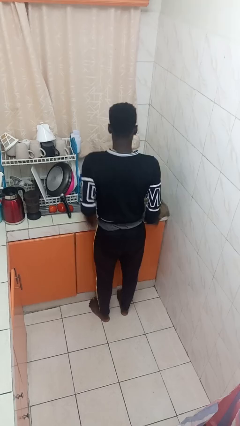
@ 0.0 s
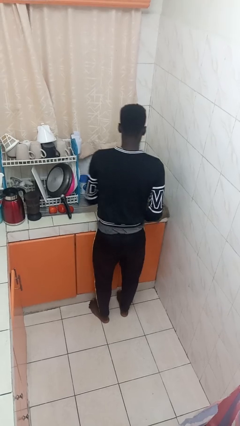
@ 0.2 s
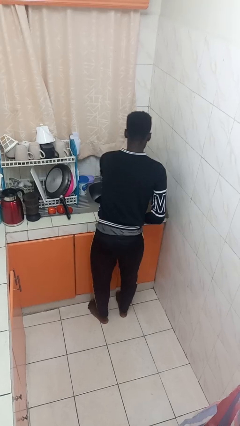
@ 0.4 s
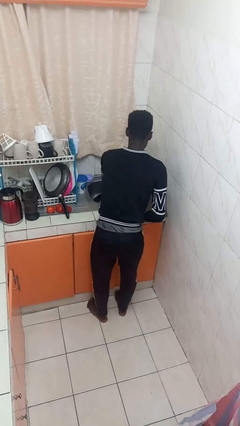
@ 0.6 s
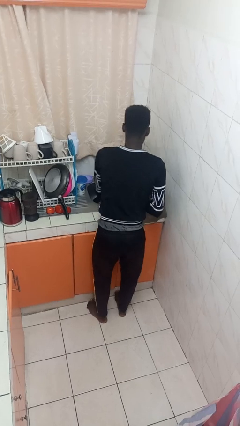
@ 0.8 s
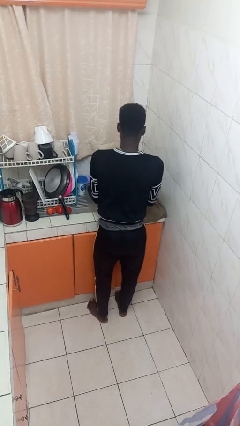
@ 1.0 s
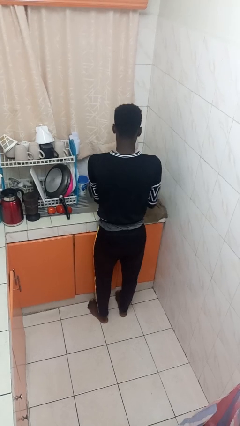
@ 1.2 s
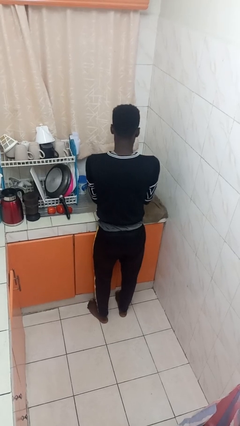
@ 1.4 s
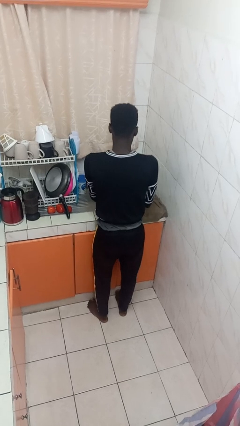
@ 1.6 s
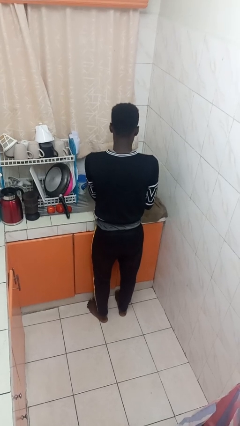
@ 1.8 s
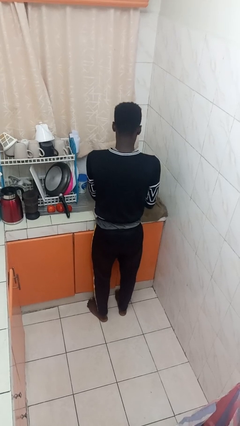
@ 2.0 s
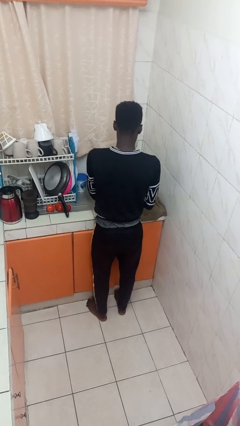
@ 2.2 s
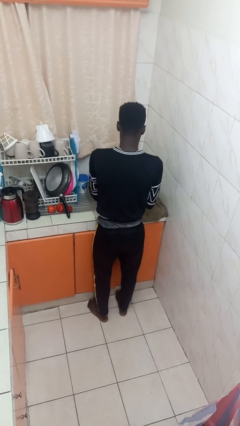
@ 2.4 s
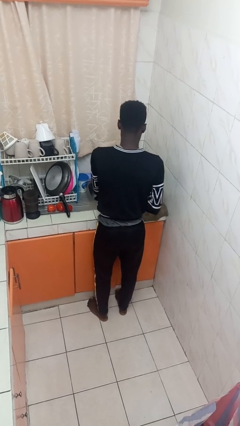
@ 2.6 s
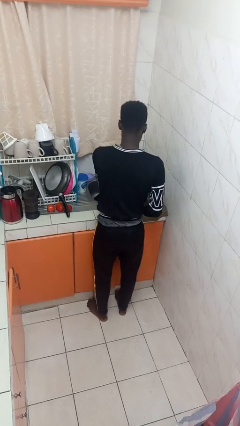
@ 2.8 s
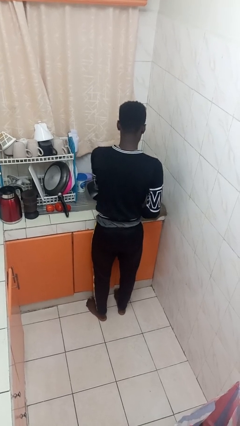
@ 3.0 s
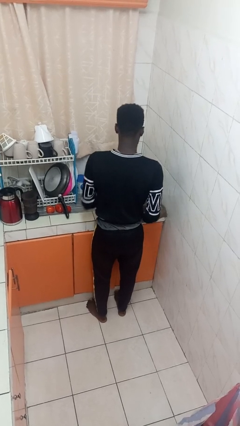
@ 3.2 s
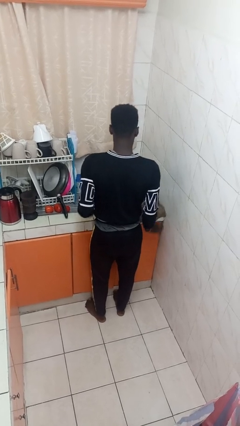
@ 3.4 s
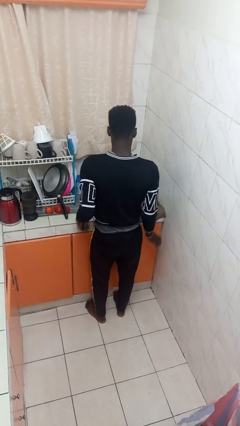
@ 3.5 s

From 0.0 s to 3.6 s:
person washes dish

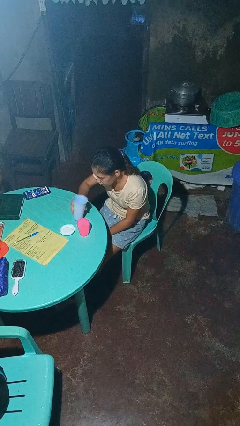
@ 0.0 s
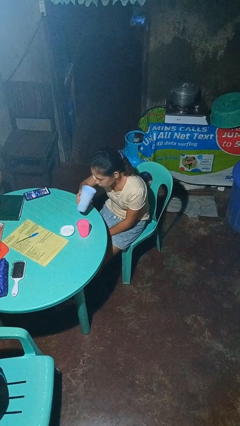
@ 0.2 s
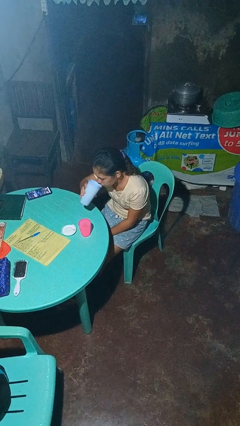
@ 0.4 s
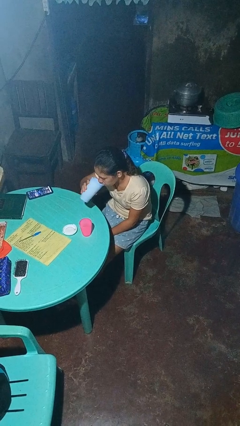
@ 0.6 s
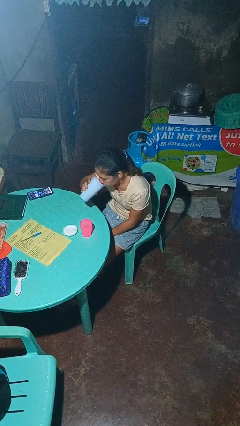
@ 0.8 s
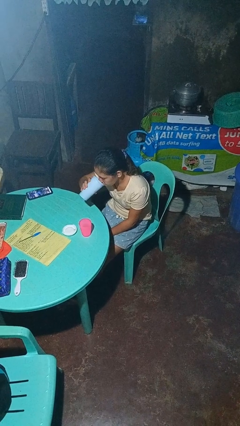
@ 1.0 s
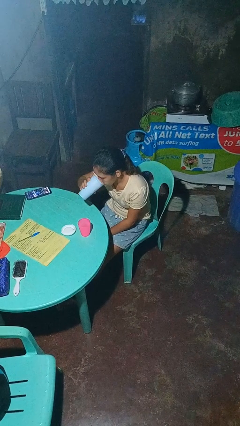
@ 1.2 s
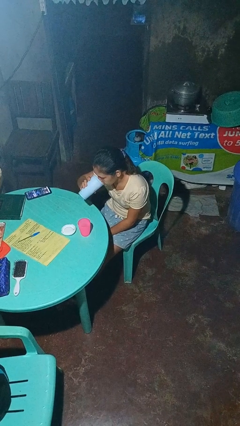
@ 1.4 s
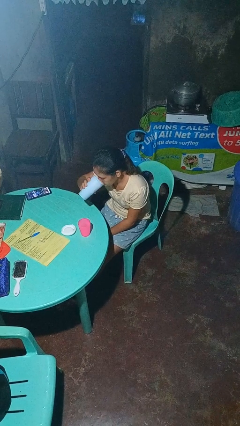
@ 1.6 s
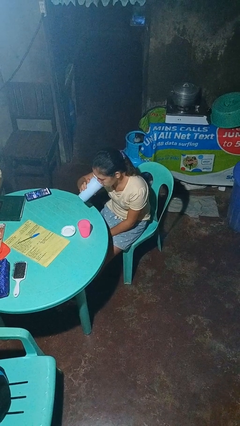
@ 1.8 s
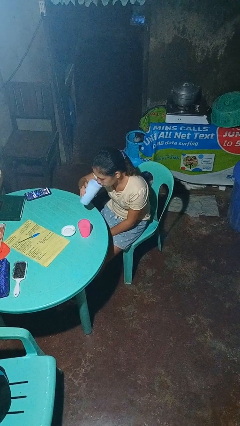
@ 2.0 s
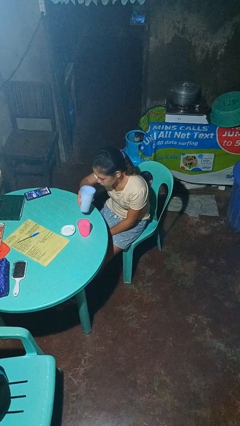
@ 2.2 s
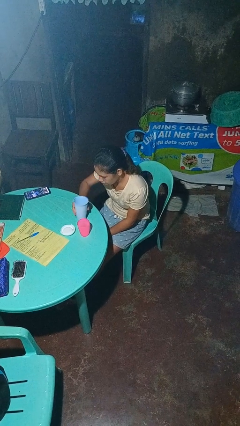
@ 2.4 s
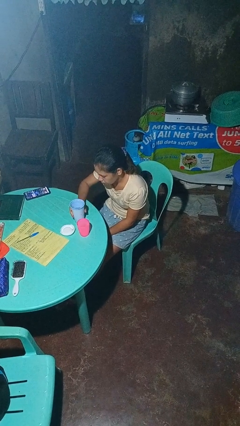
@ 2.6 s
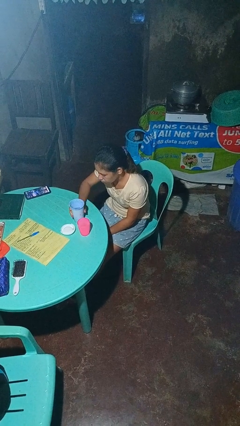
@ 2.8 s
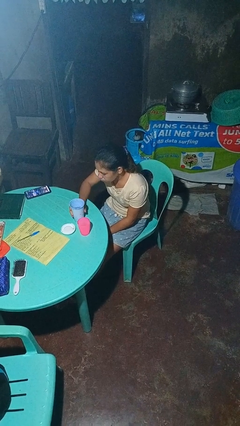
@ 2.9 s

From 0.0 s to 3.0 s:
person drinks from bottle

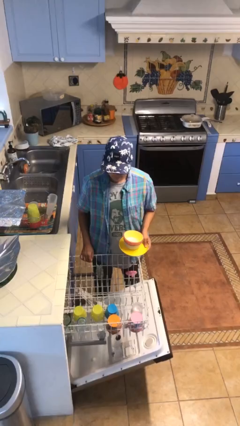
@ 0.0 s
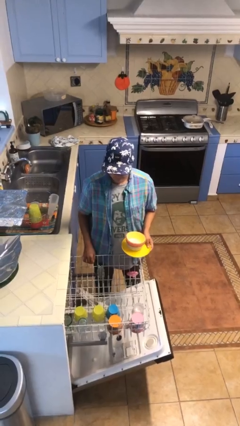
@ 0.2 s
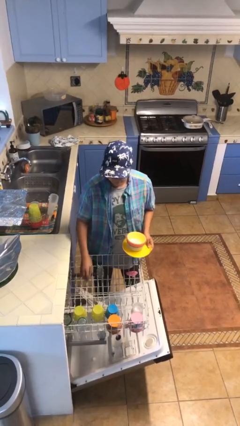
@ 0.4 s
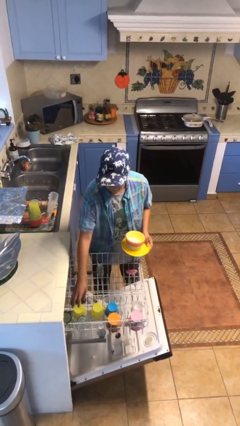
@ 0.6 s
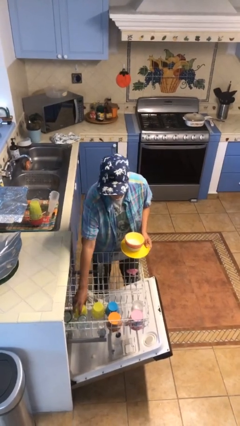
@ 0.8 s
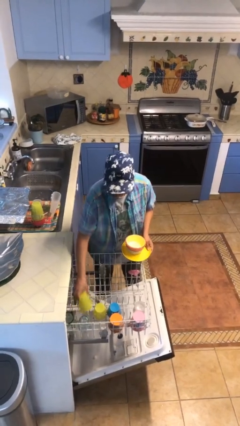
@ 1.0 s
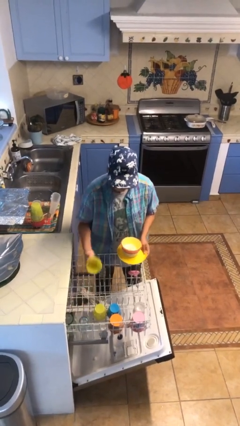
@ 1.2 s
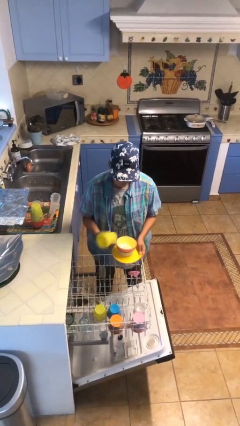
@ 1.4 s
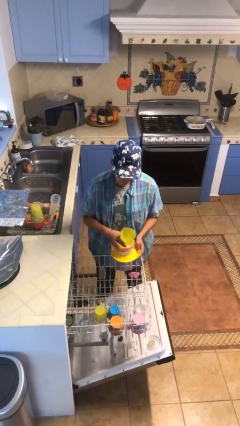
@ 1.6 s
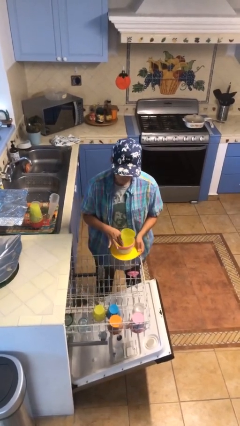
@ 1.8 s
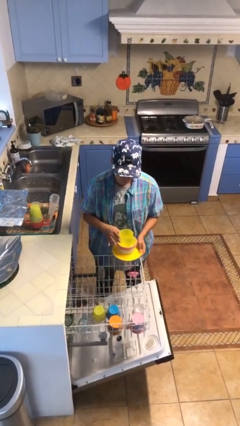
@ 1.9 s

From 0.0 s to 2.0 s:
person unloads dishwasher

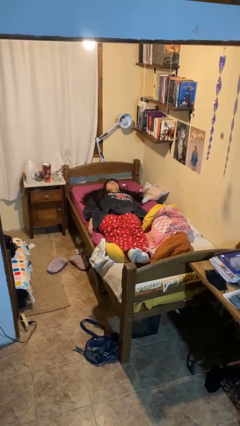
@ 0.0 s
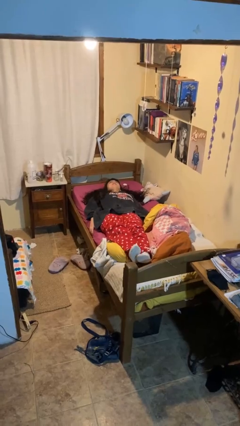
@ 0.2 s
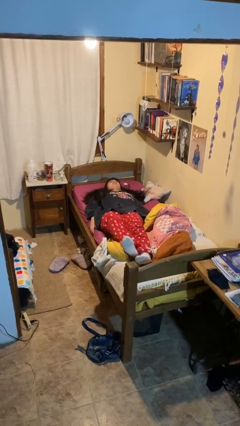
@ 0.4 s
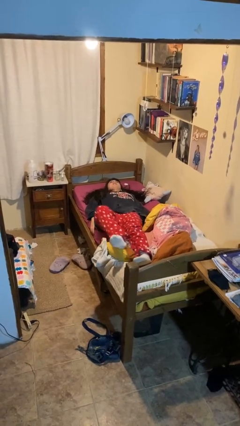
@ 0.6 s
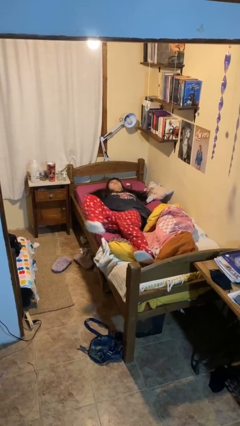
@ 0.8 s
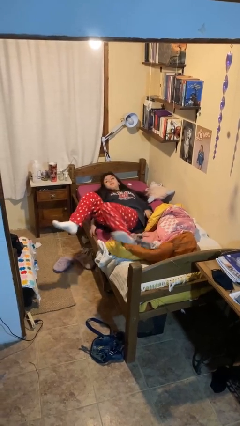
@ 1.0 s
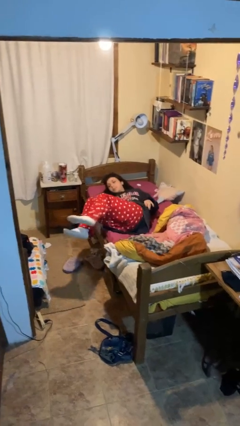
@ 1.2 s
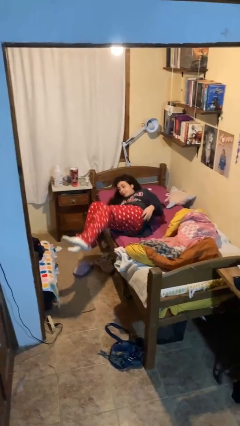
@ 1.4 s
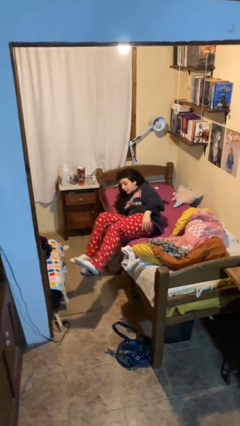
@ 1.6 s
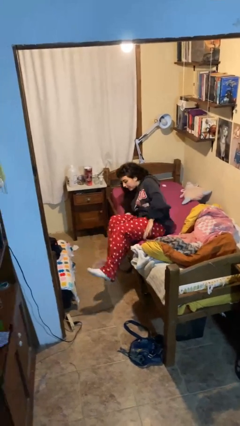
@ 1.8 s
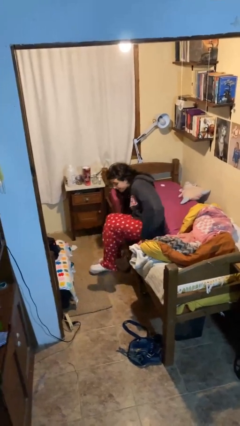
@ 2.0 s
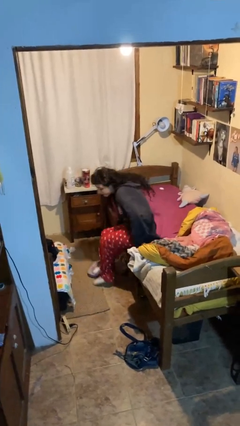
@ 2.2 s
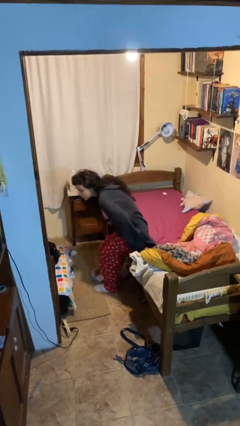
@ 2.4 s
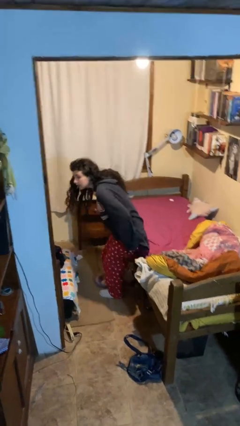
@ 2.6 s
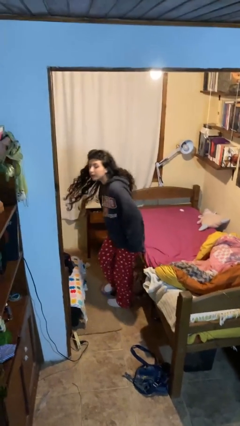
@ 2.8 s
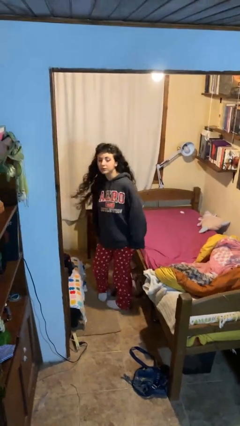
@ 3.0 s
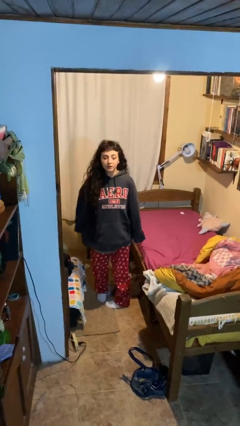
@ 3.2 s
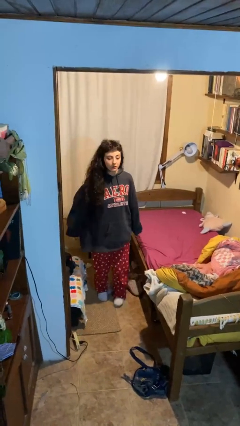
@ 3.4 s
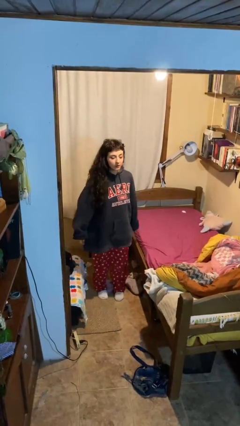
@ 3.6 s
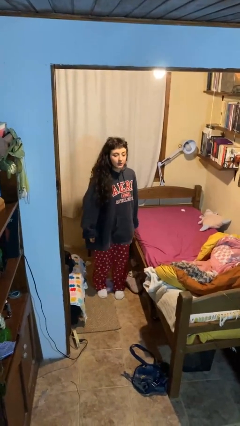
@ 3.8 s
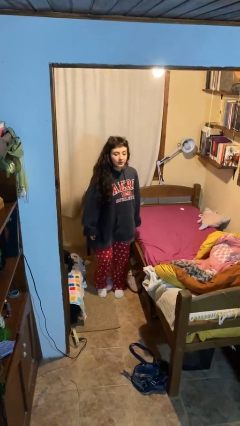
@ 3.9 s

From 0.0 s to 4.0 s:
person stands up

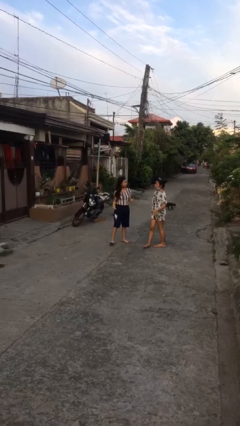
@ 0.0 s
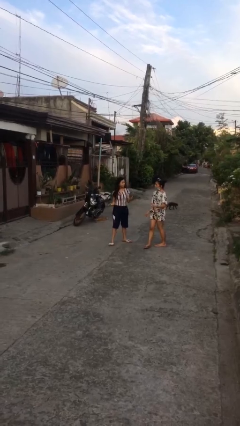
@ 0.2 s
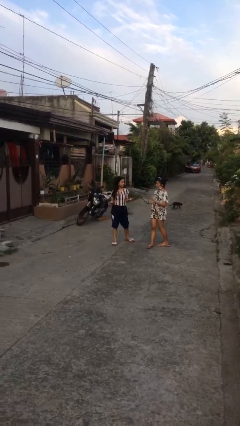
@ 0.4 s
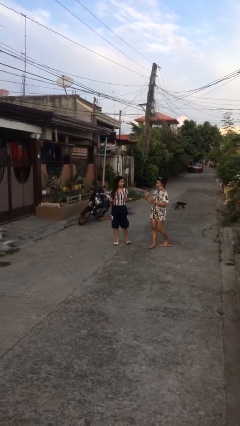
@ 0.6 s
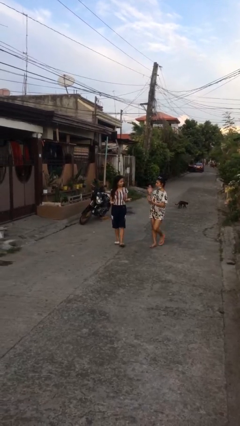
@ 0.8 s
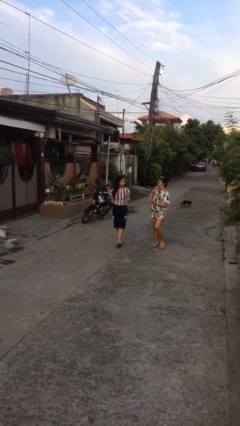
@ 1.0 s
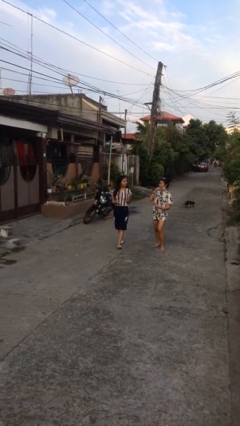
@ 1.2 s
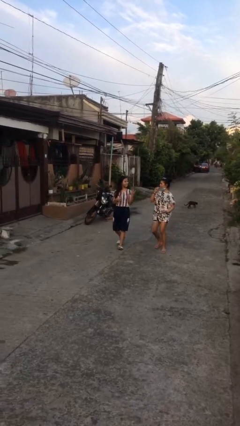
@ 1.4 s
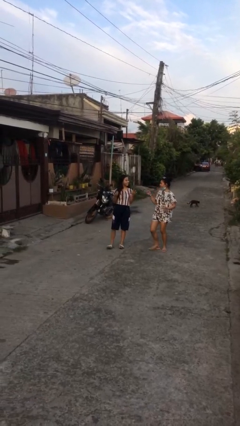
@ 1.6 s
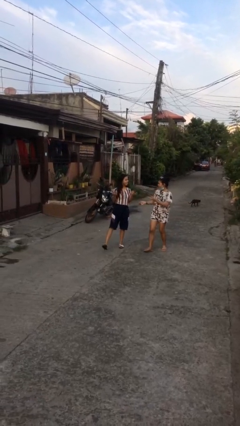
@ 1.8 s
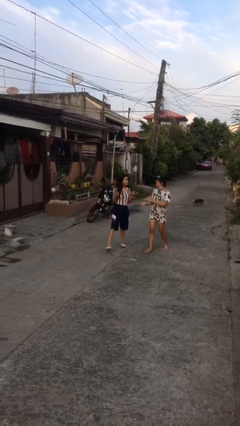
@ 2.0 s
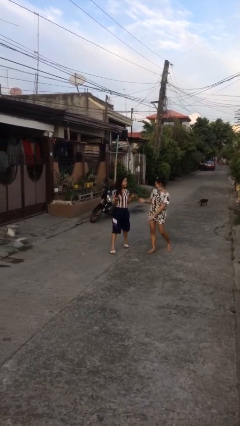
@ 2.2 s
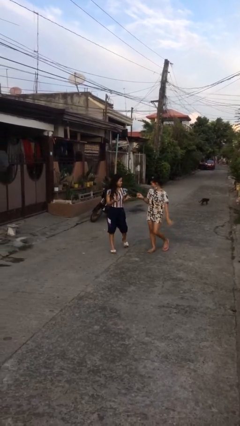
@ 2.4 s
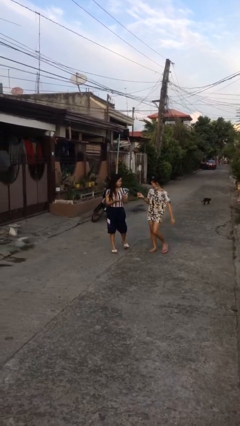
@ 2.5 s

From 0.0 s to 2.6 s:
person talks to person

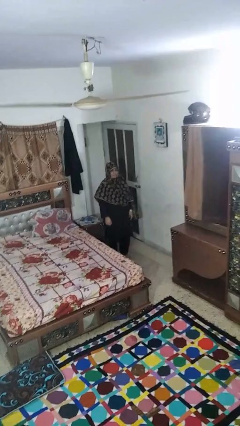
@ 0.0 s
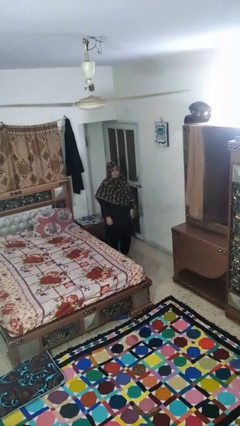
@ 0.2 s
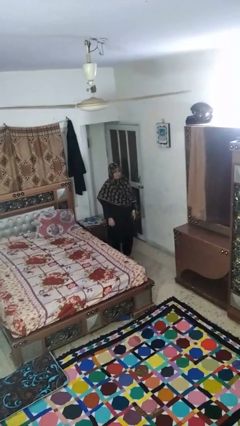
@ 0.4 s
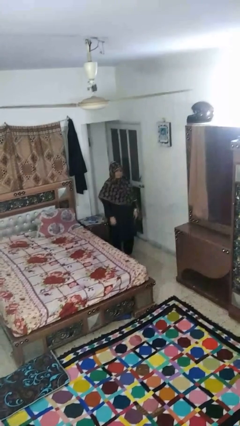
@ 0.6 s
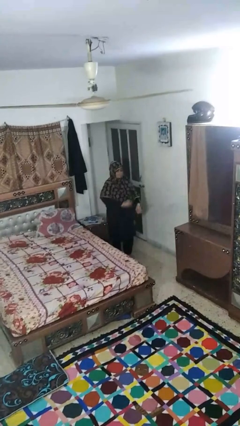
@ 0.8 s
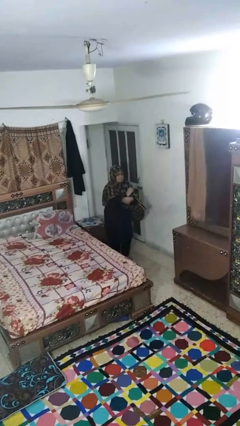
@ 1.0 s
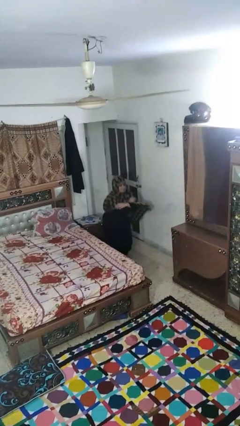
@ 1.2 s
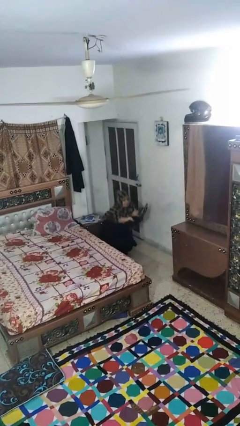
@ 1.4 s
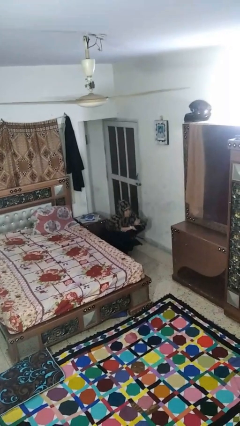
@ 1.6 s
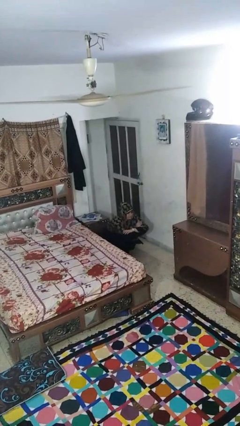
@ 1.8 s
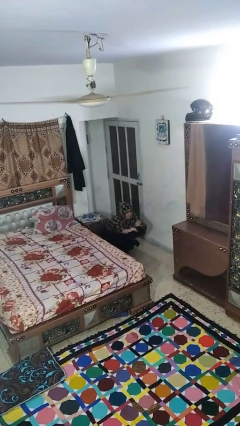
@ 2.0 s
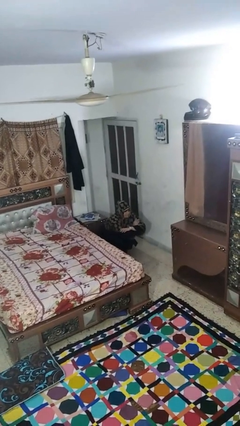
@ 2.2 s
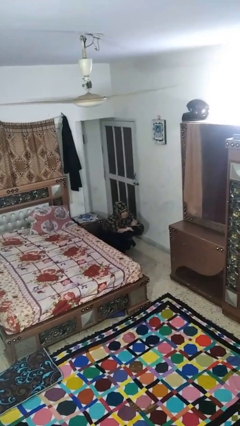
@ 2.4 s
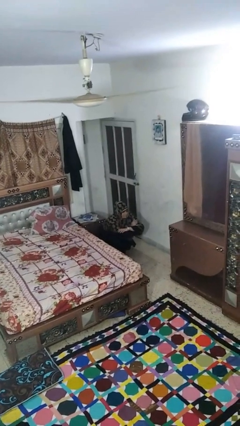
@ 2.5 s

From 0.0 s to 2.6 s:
person squats
